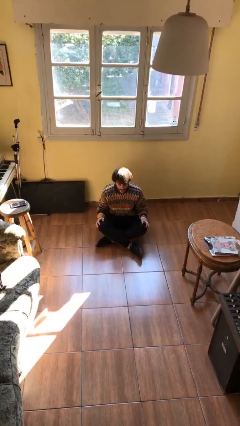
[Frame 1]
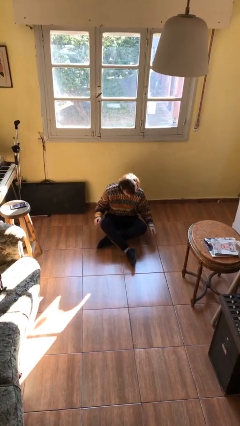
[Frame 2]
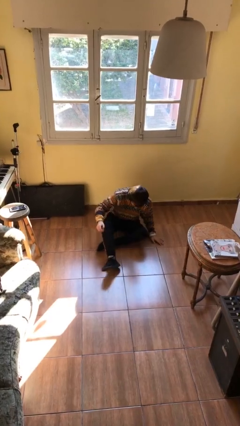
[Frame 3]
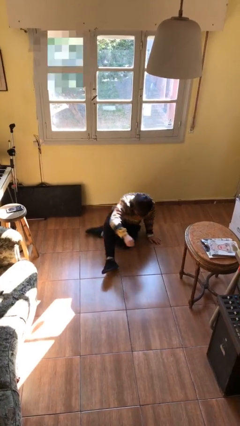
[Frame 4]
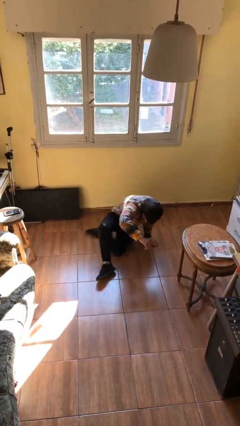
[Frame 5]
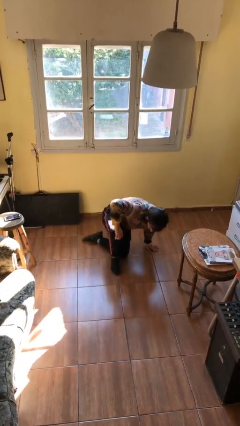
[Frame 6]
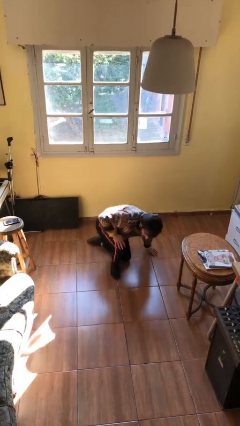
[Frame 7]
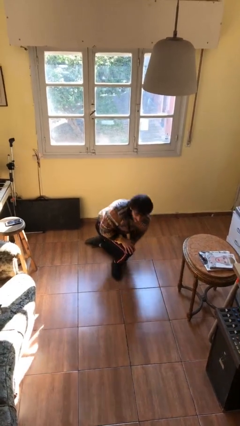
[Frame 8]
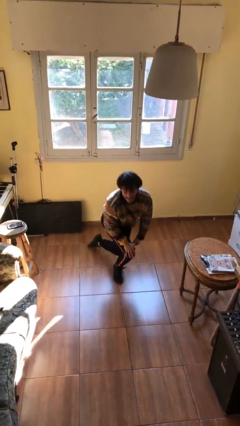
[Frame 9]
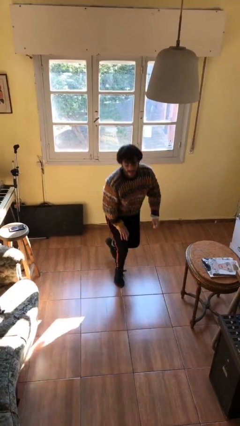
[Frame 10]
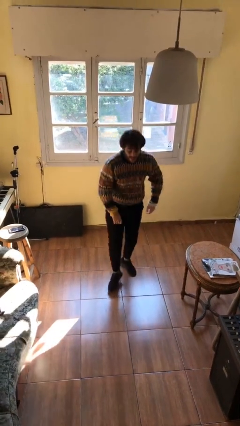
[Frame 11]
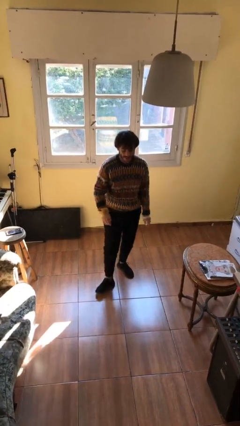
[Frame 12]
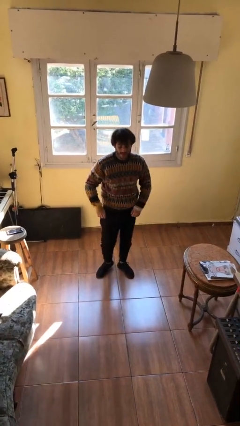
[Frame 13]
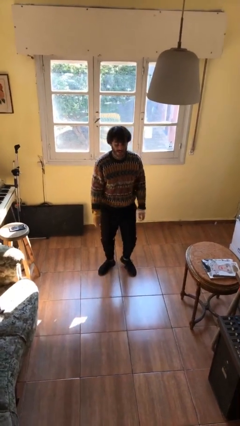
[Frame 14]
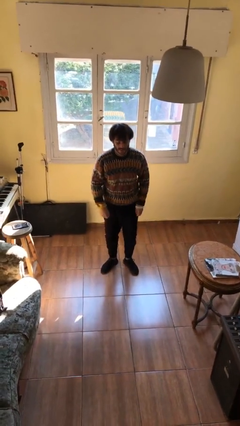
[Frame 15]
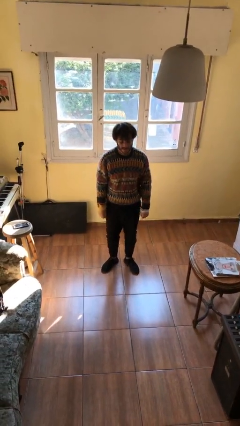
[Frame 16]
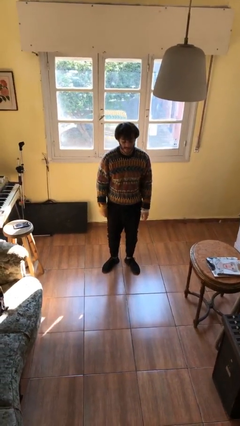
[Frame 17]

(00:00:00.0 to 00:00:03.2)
person stands up from floor

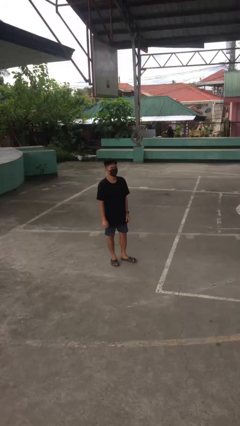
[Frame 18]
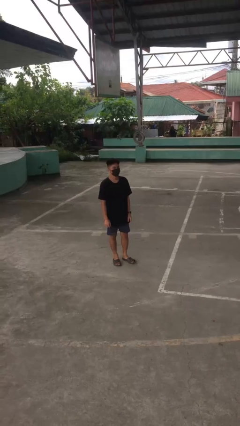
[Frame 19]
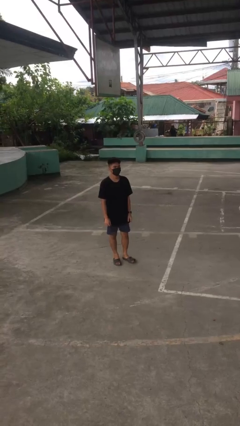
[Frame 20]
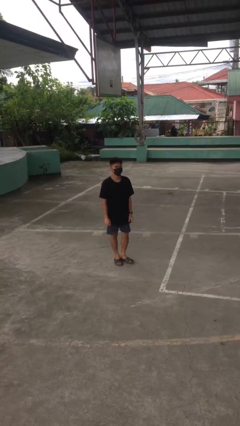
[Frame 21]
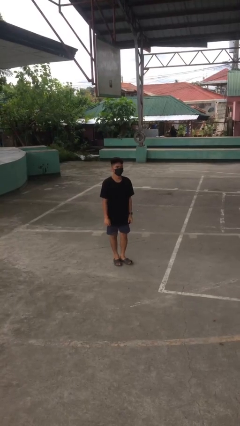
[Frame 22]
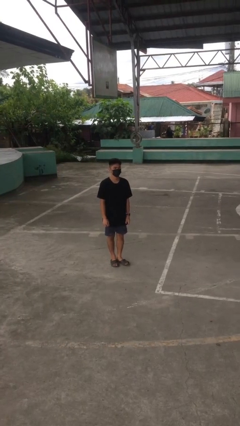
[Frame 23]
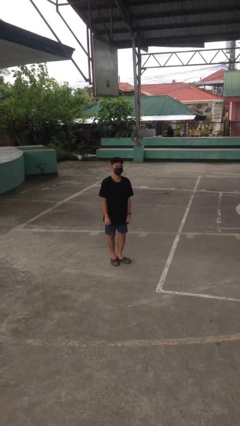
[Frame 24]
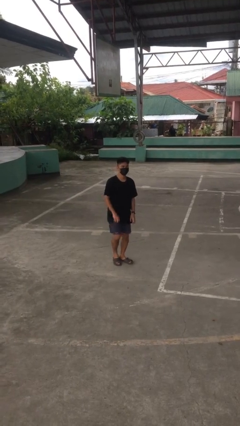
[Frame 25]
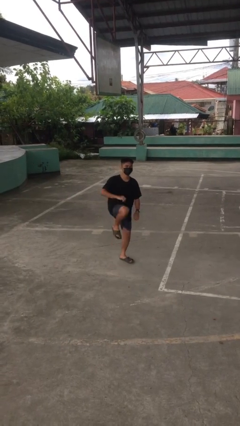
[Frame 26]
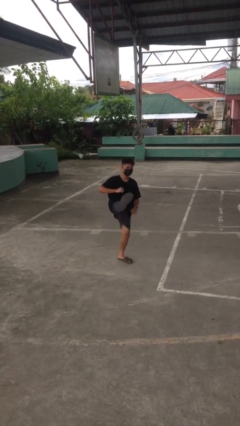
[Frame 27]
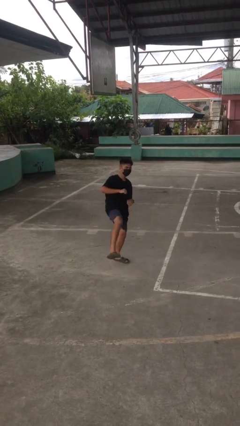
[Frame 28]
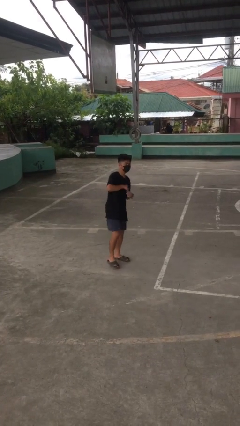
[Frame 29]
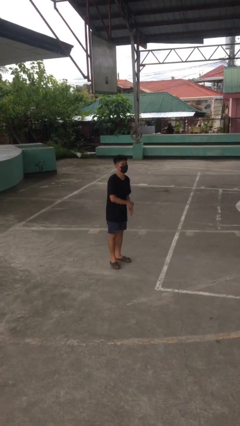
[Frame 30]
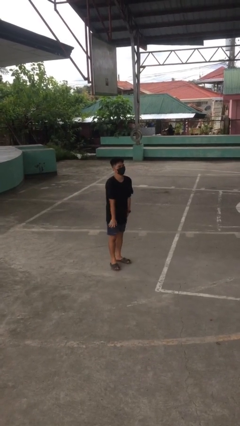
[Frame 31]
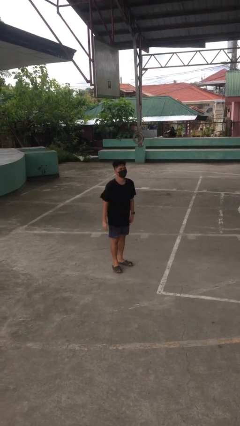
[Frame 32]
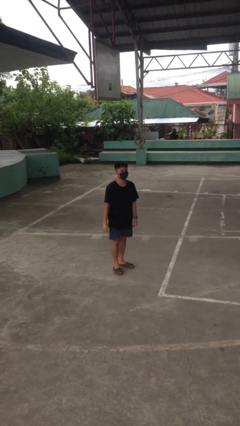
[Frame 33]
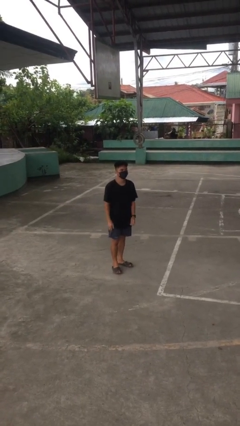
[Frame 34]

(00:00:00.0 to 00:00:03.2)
person karate kicks

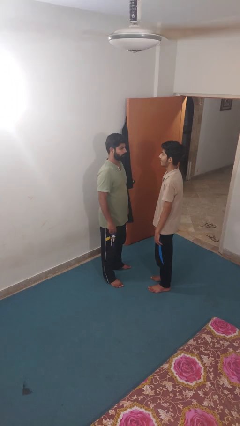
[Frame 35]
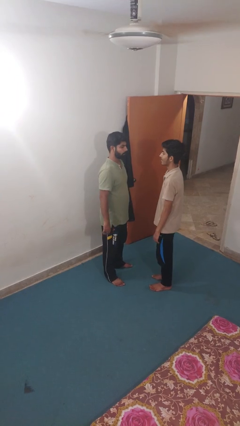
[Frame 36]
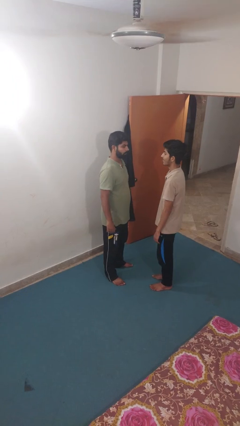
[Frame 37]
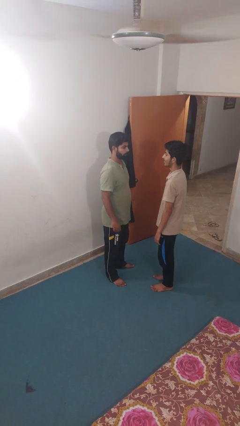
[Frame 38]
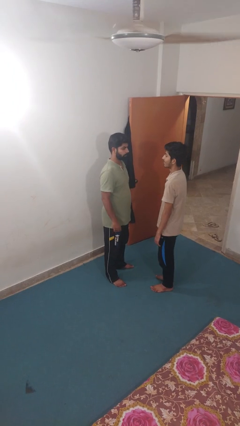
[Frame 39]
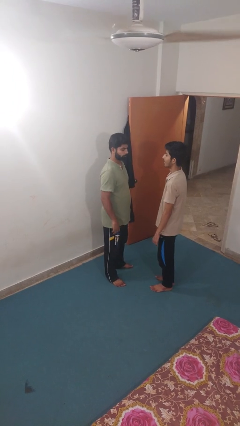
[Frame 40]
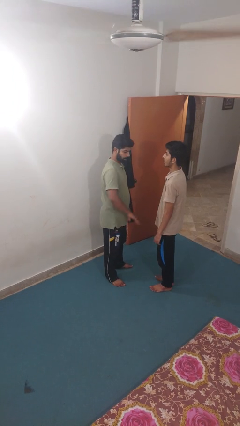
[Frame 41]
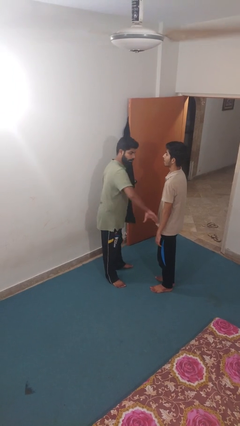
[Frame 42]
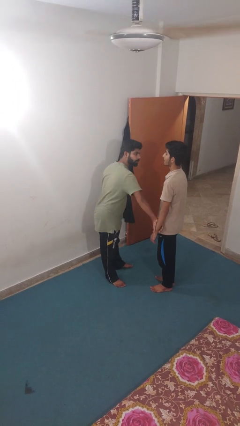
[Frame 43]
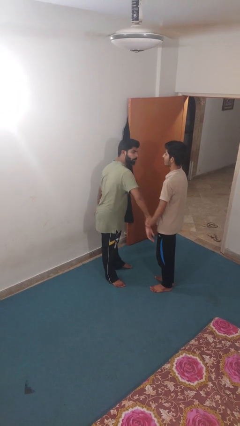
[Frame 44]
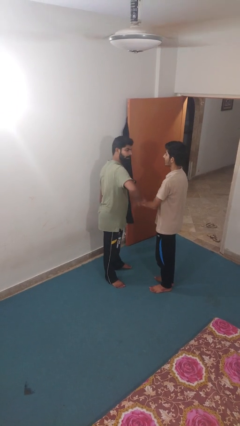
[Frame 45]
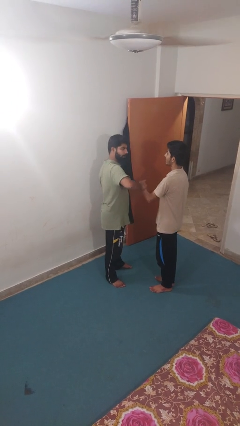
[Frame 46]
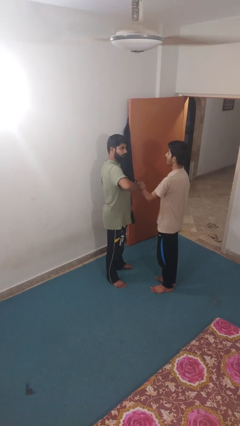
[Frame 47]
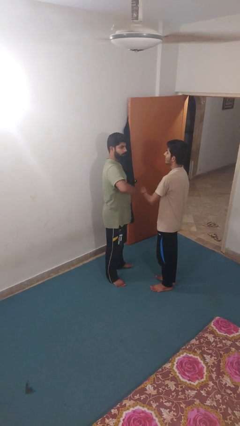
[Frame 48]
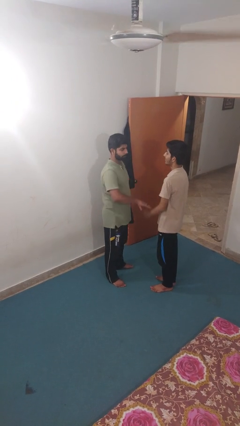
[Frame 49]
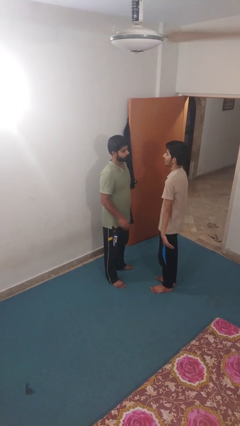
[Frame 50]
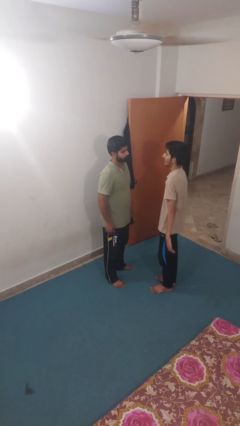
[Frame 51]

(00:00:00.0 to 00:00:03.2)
person grabs person by forearm

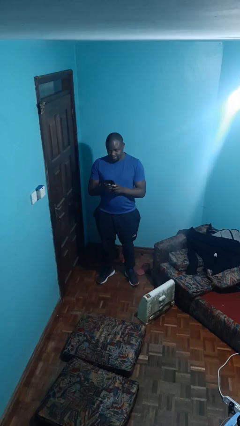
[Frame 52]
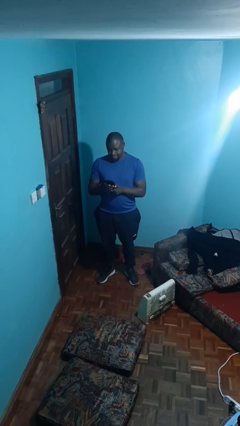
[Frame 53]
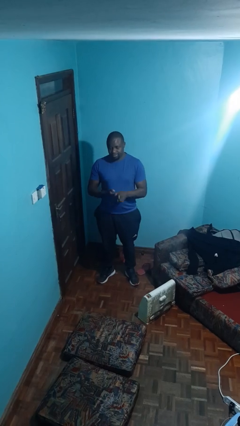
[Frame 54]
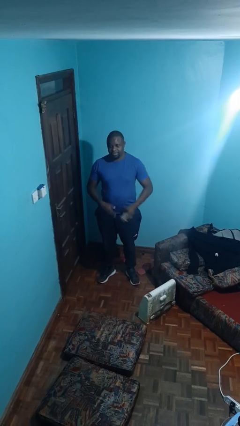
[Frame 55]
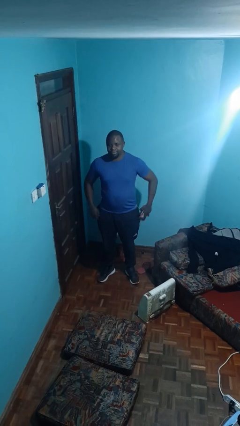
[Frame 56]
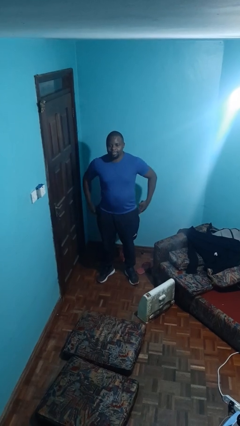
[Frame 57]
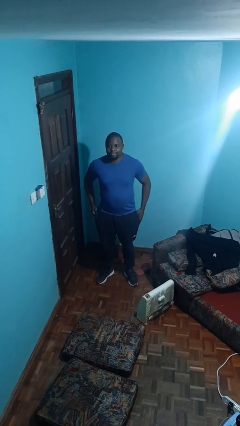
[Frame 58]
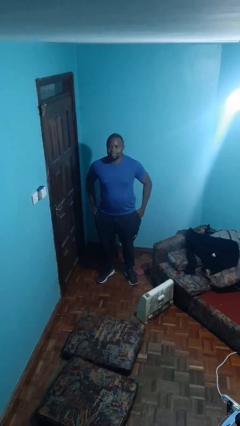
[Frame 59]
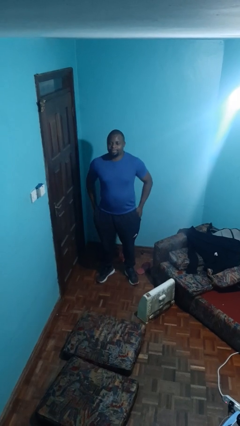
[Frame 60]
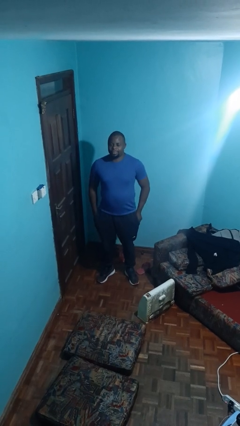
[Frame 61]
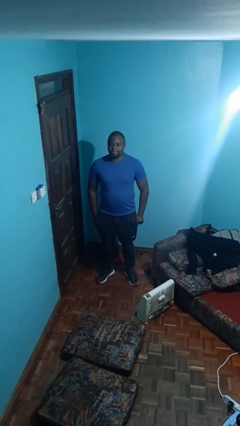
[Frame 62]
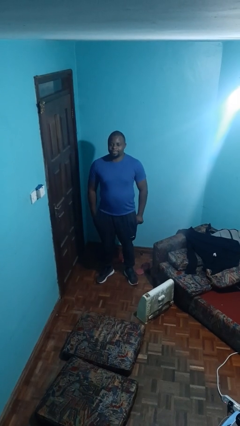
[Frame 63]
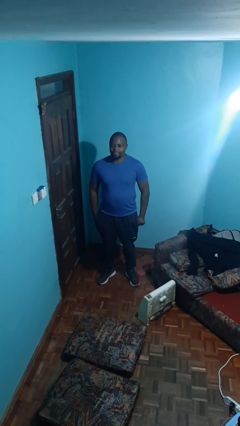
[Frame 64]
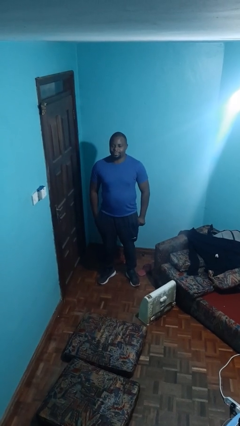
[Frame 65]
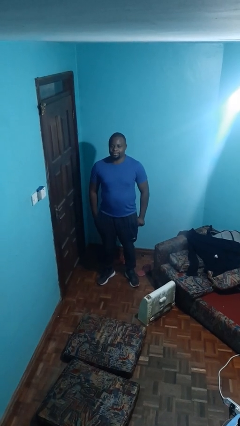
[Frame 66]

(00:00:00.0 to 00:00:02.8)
person puts phone into pocket

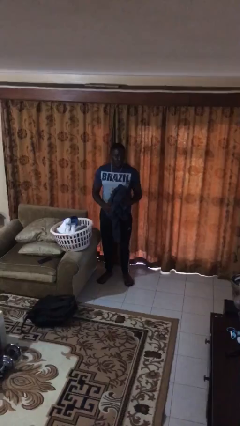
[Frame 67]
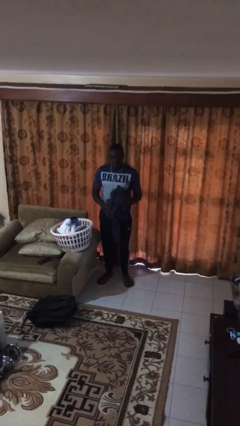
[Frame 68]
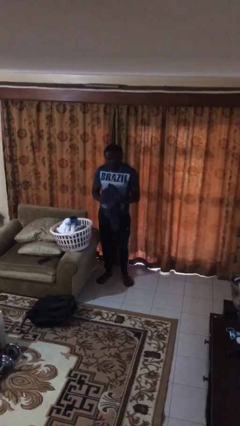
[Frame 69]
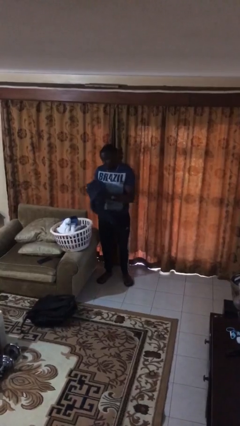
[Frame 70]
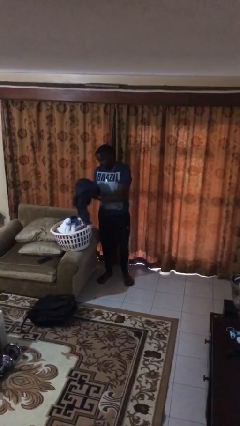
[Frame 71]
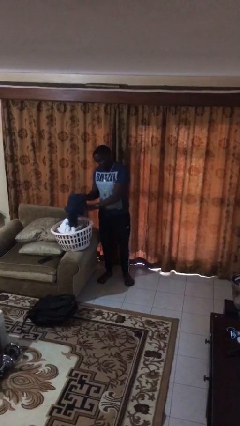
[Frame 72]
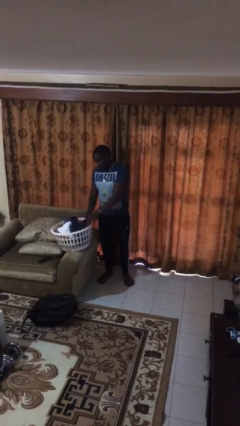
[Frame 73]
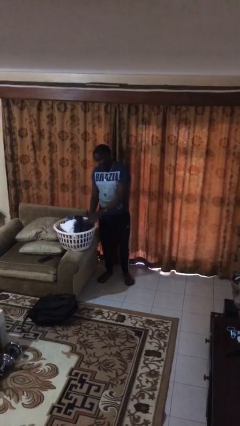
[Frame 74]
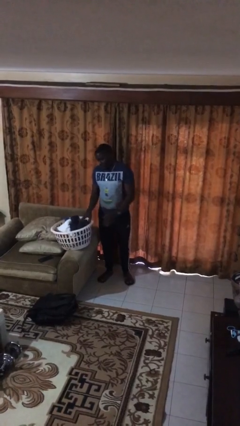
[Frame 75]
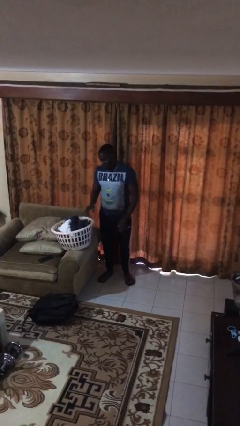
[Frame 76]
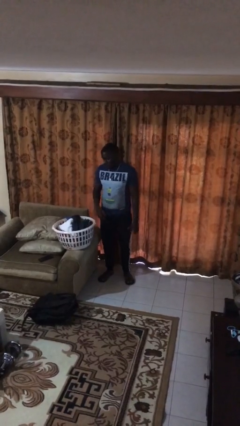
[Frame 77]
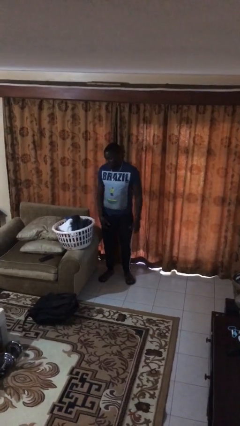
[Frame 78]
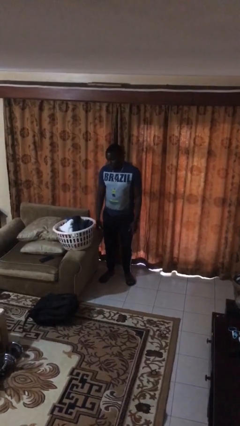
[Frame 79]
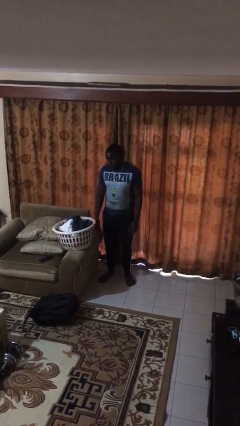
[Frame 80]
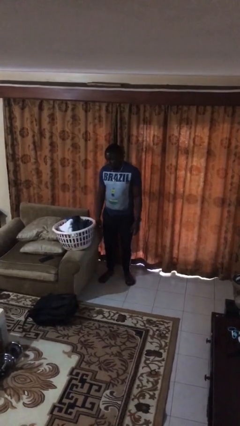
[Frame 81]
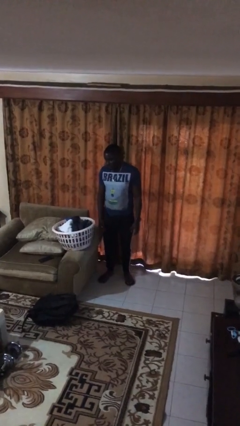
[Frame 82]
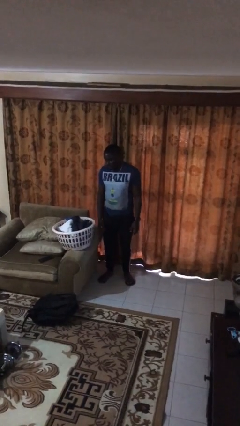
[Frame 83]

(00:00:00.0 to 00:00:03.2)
person puts object into basket

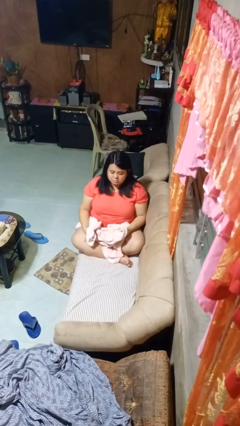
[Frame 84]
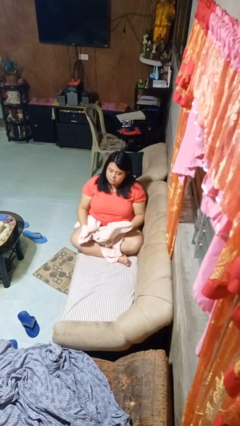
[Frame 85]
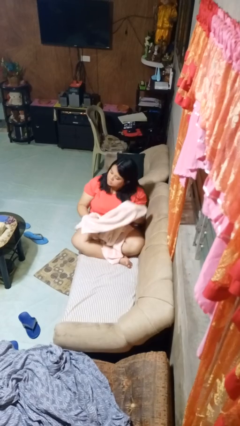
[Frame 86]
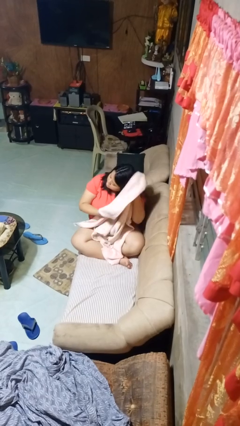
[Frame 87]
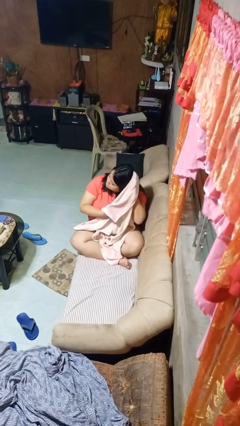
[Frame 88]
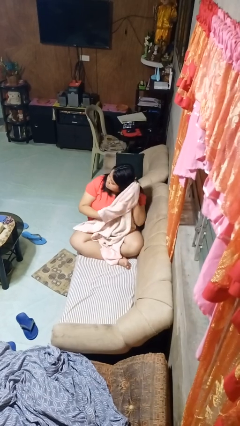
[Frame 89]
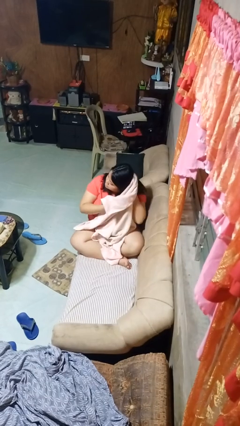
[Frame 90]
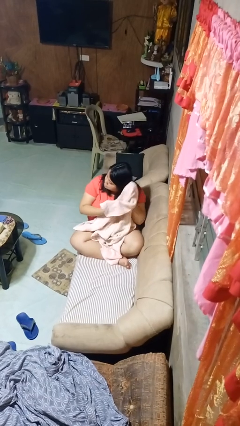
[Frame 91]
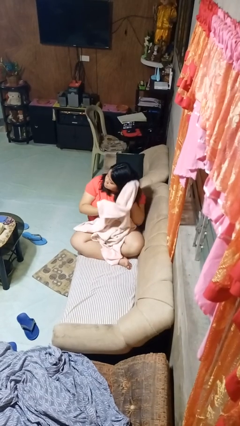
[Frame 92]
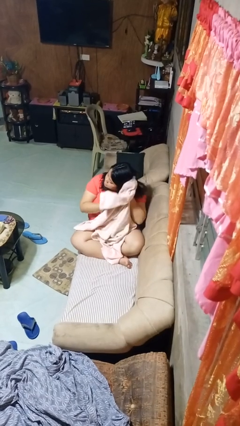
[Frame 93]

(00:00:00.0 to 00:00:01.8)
person dries hair with towel
